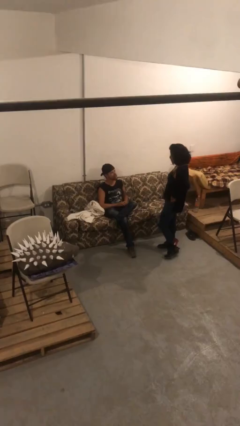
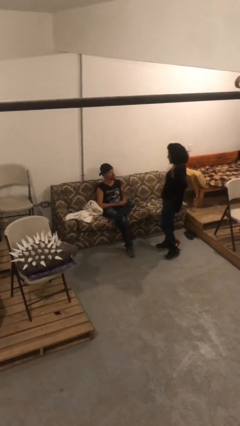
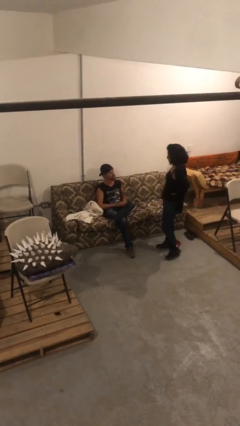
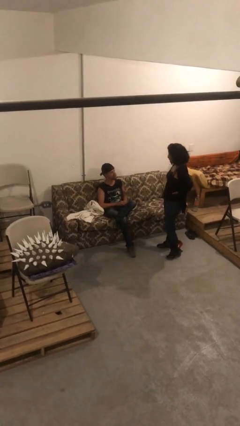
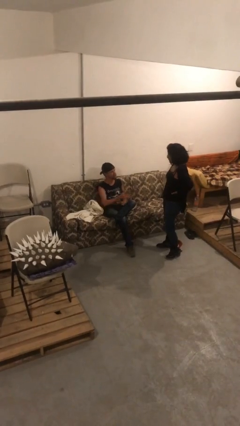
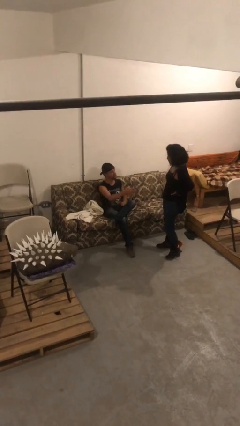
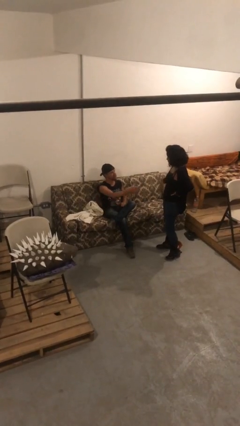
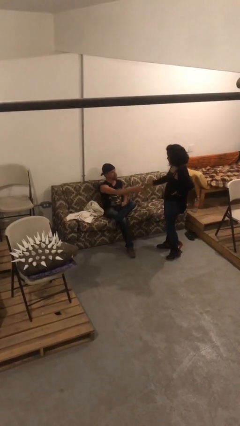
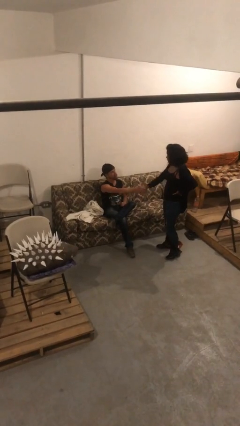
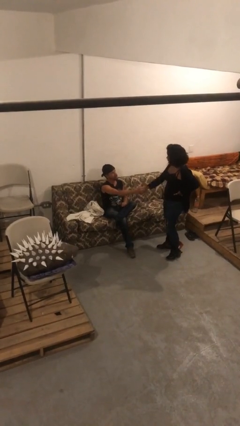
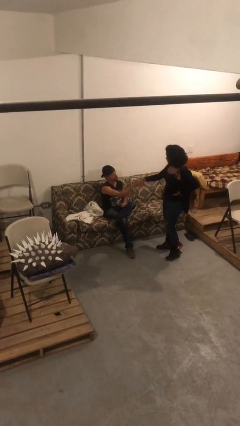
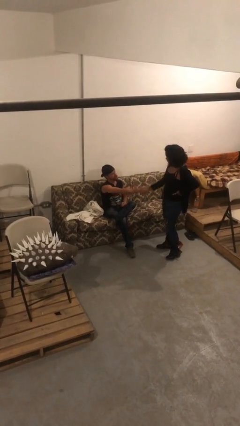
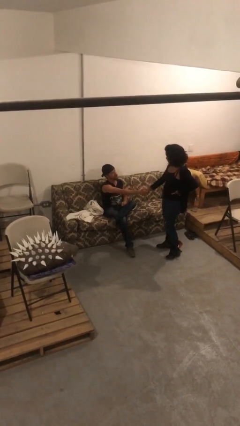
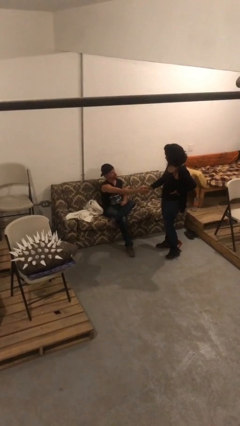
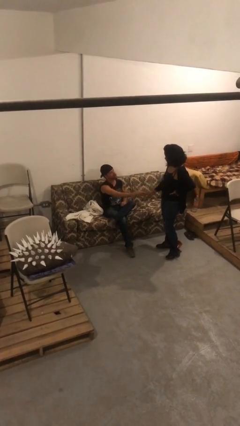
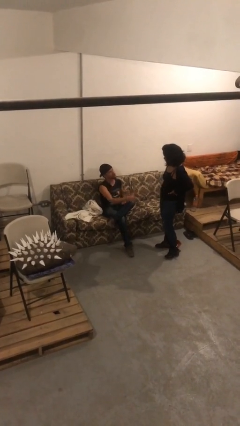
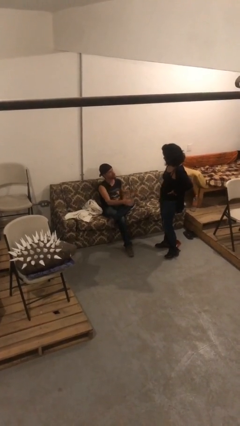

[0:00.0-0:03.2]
person shakes hand

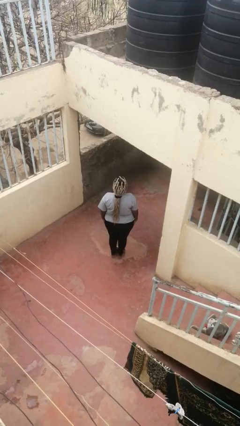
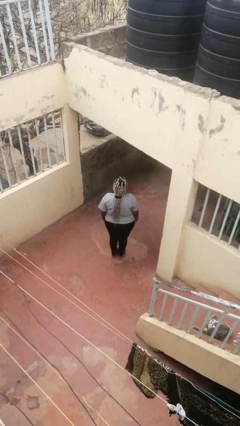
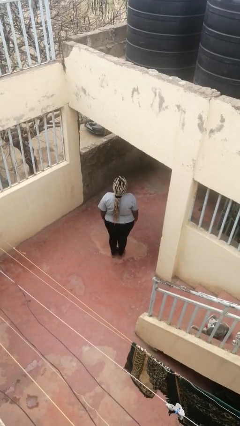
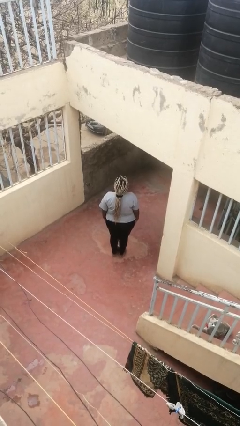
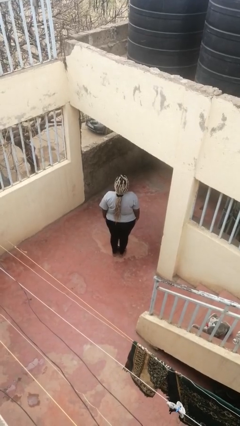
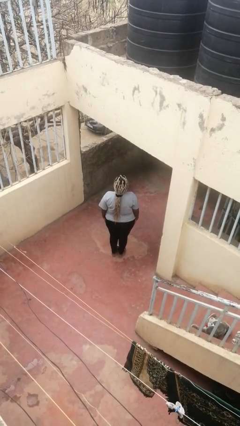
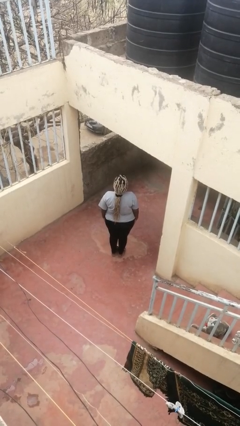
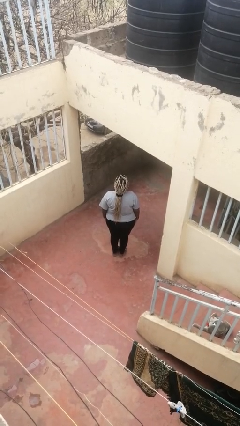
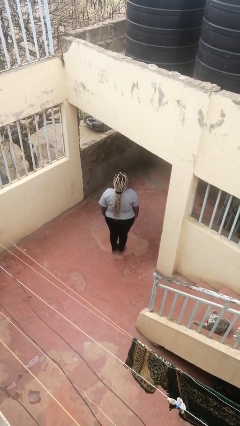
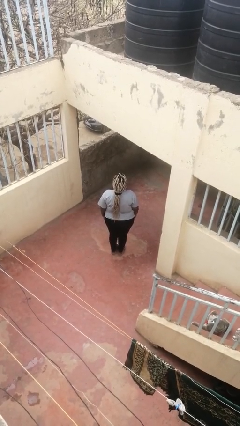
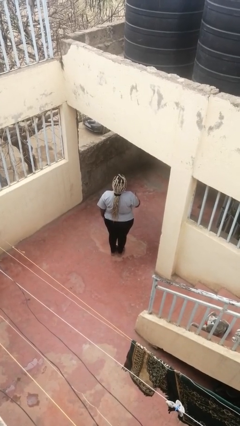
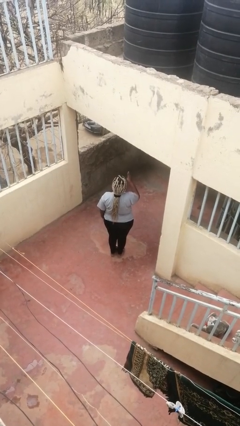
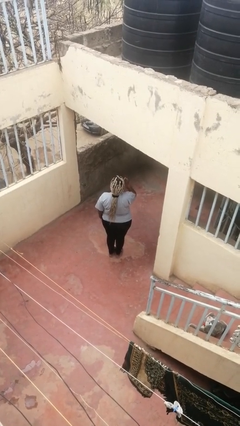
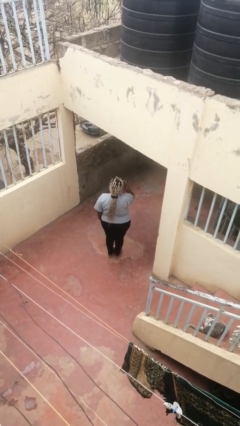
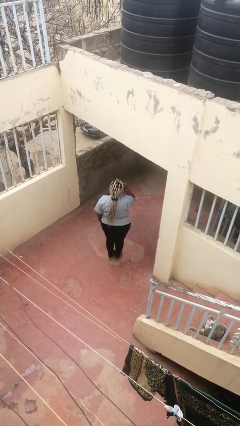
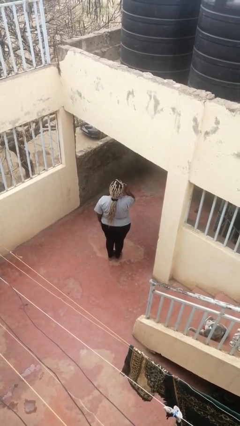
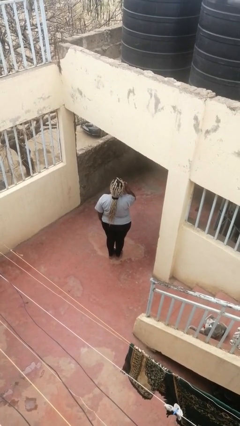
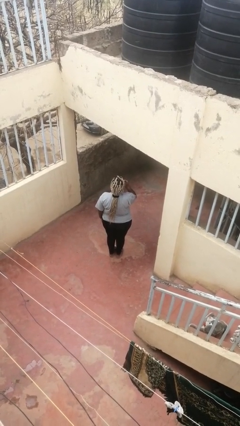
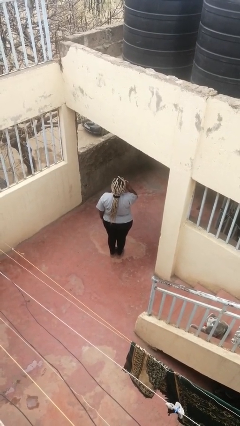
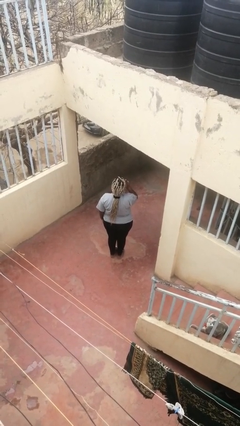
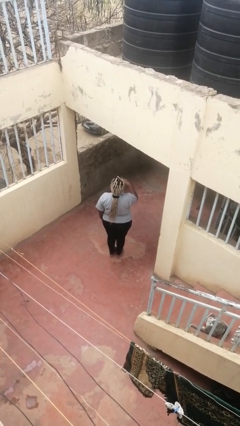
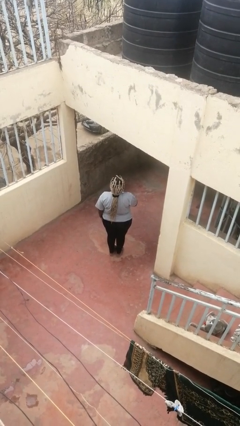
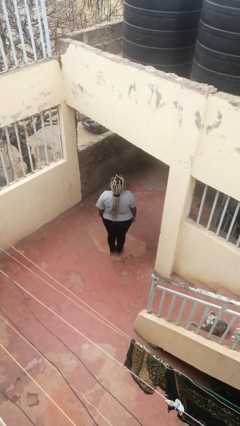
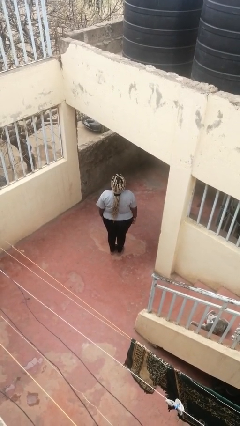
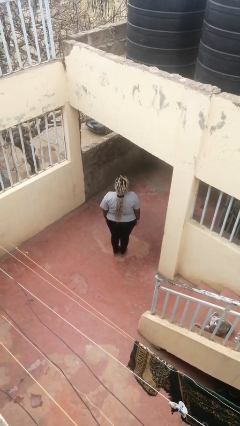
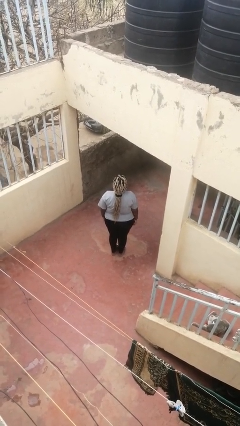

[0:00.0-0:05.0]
person salutes

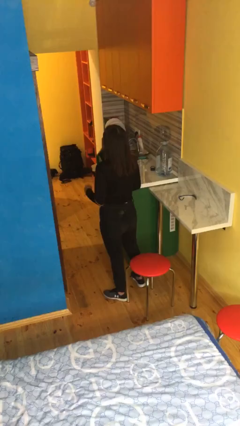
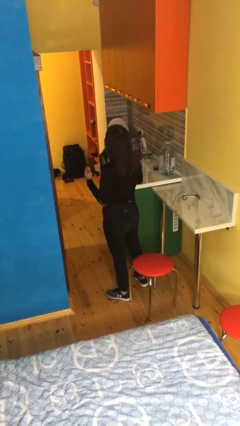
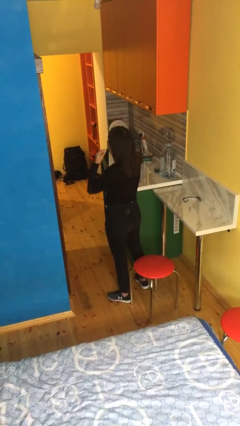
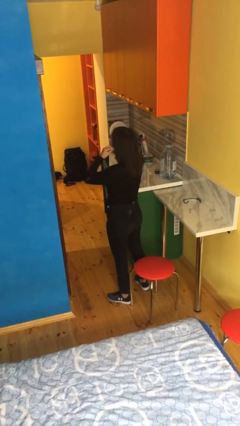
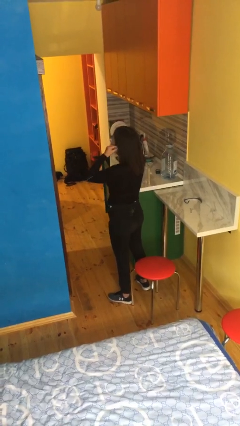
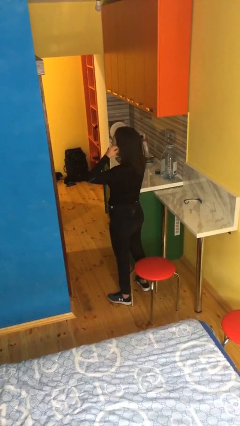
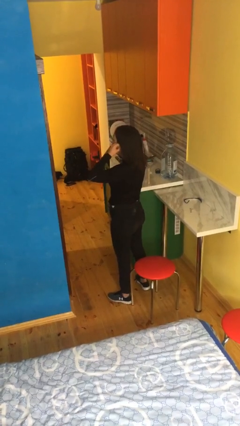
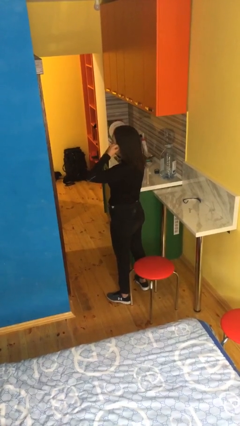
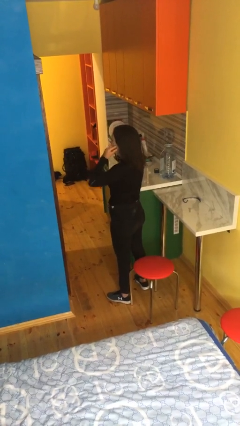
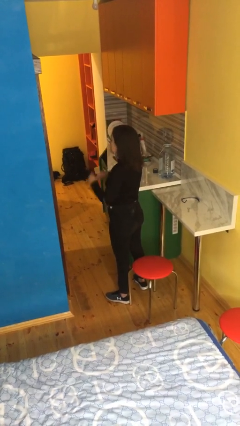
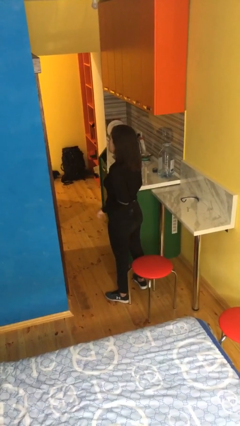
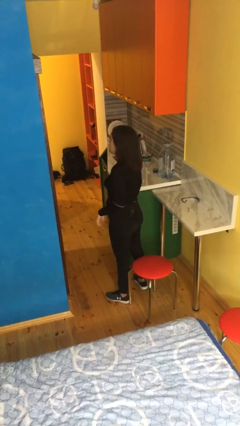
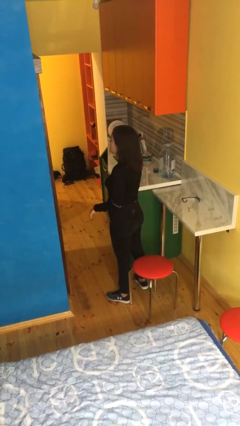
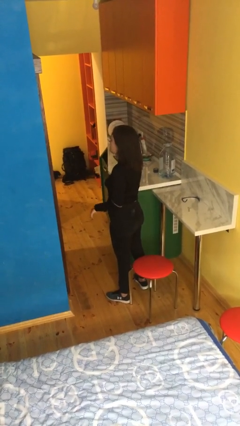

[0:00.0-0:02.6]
person puts on headphones

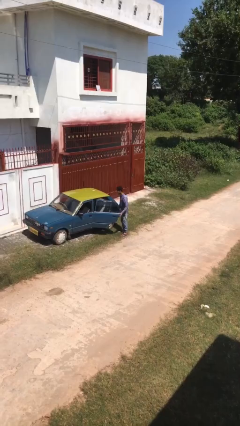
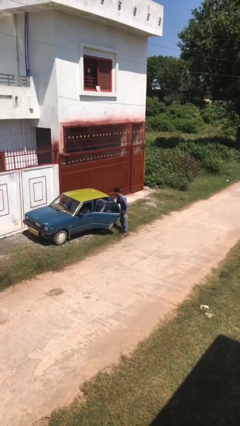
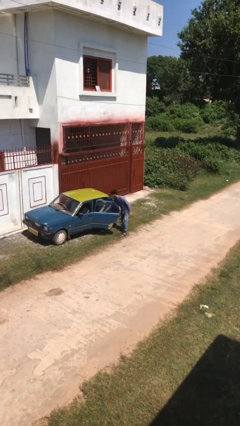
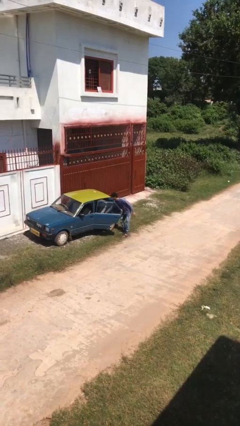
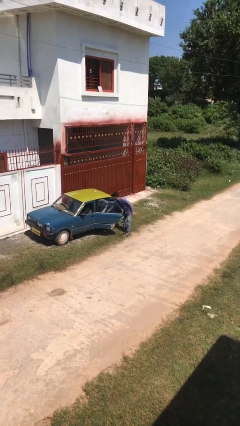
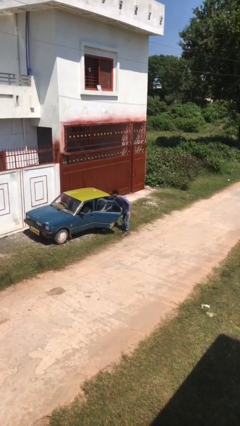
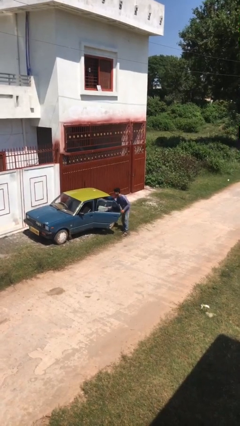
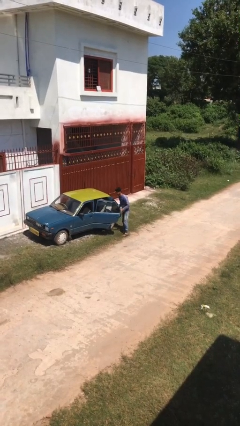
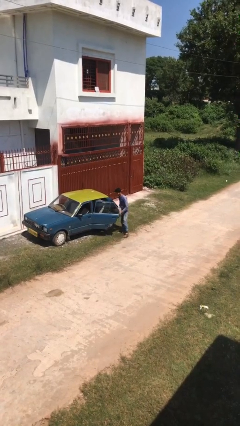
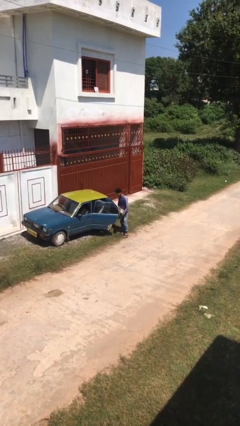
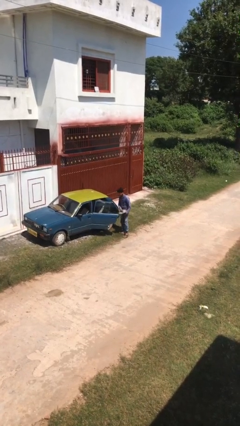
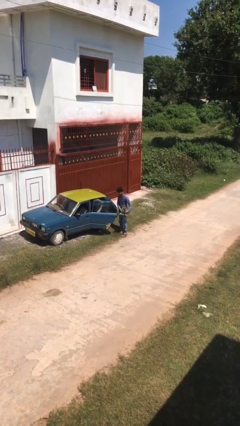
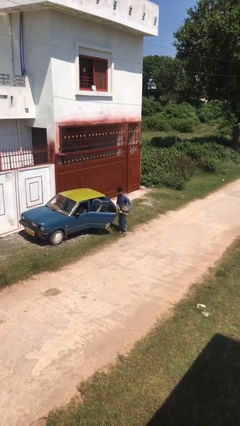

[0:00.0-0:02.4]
person unloads car

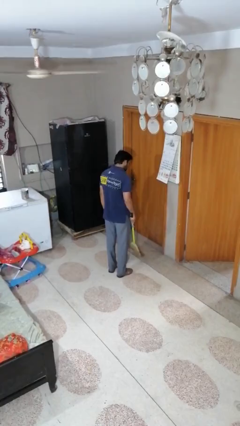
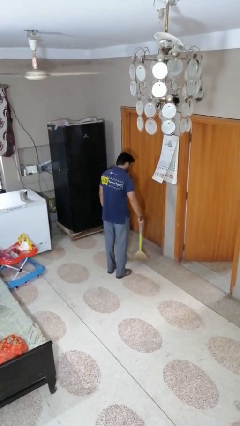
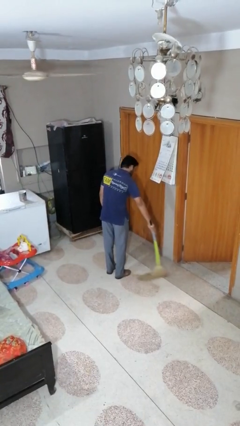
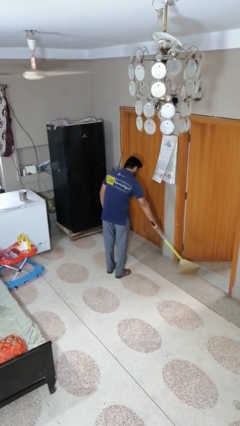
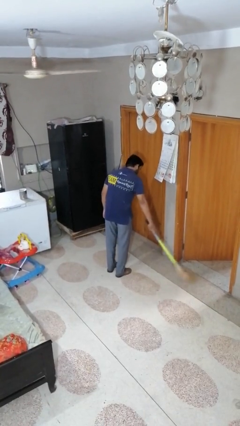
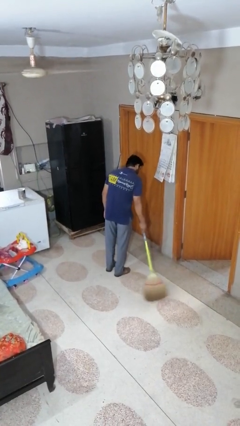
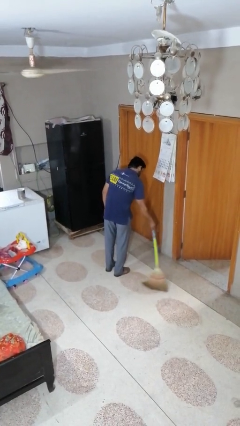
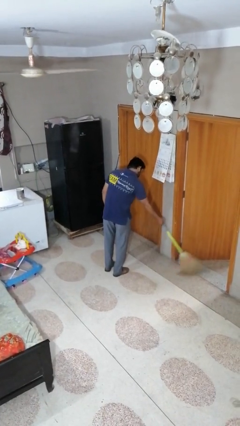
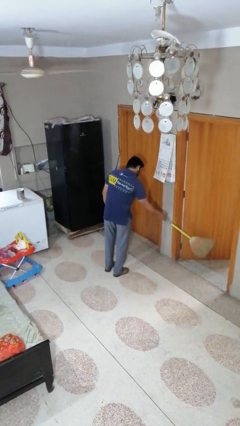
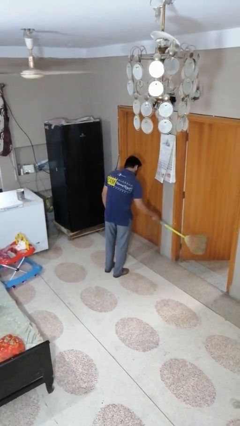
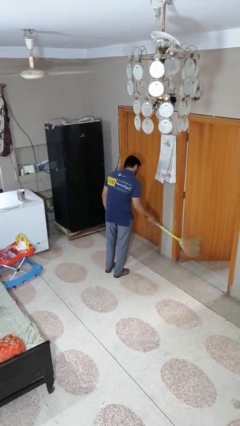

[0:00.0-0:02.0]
person sweeps floor

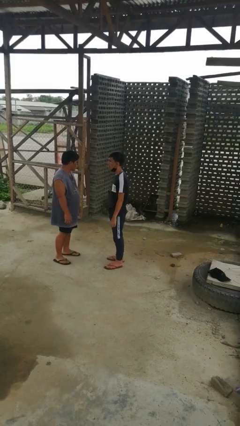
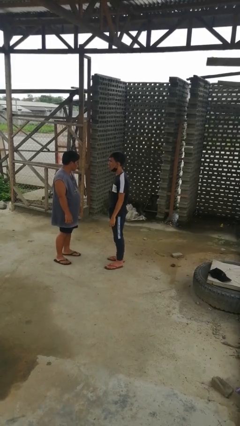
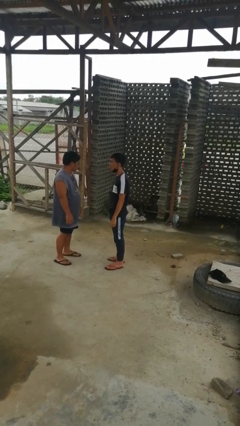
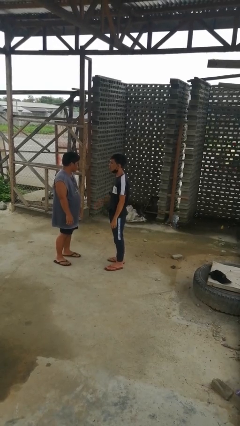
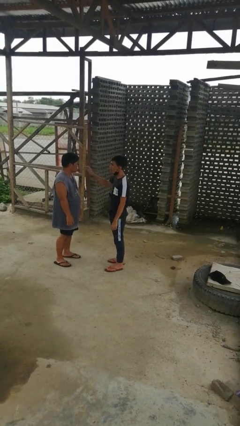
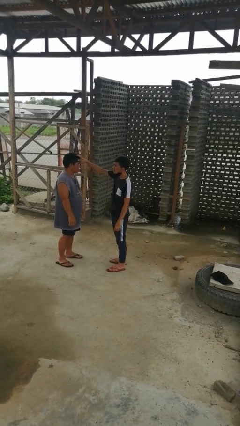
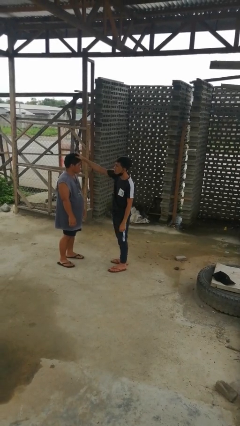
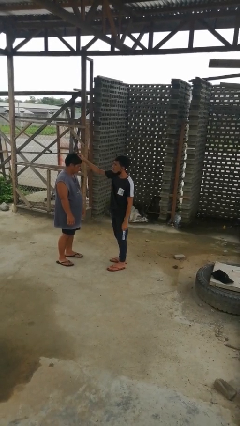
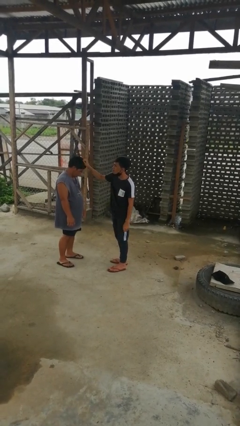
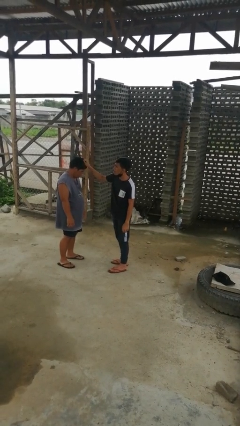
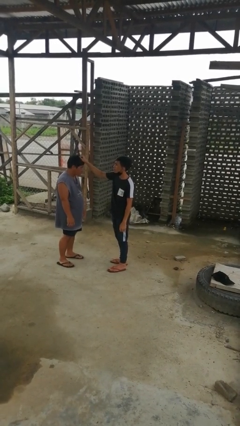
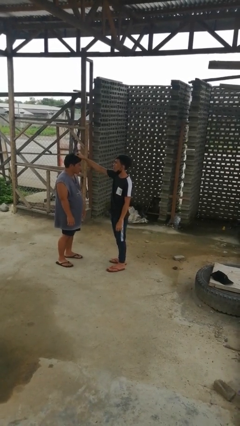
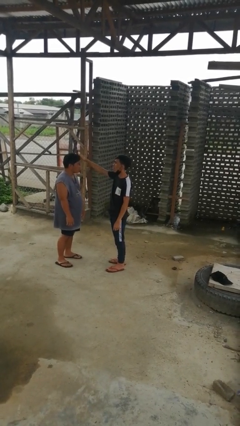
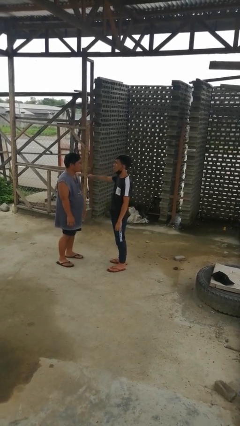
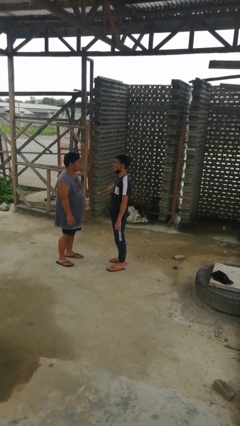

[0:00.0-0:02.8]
person grabs person by hair
